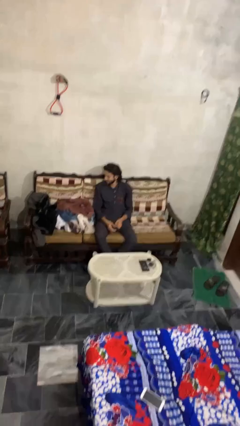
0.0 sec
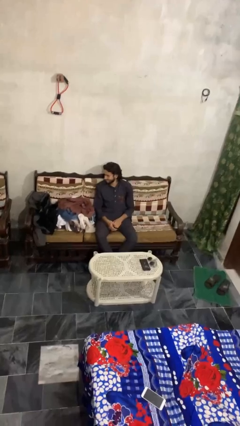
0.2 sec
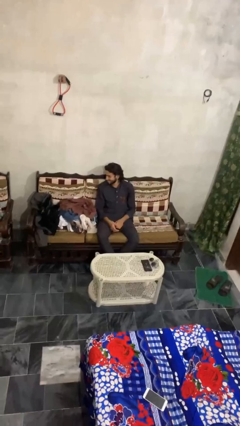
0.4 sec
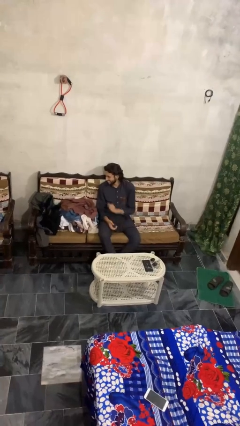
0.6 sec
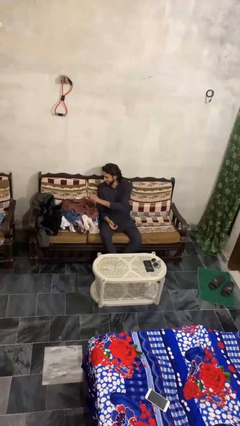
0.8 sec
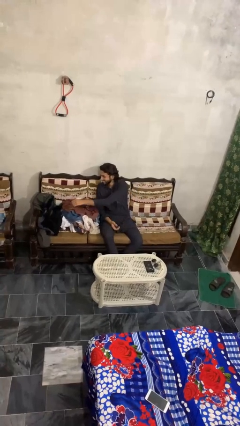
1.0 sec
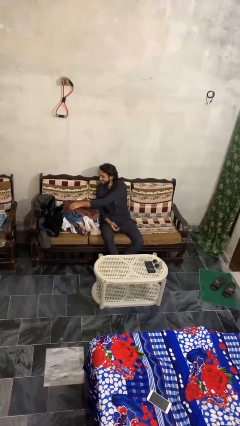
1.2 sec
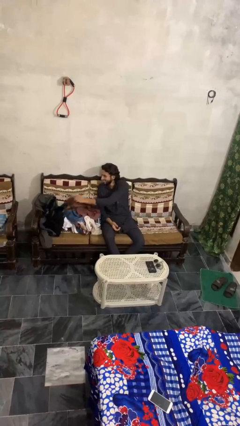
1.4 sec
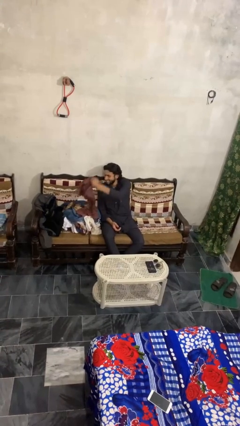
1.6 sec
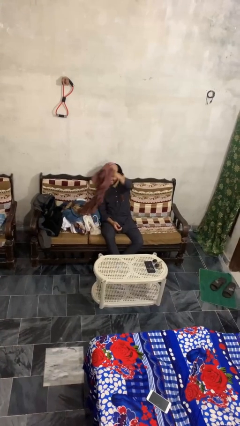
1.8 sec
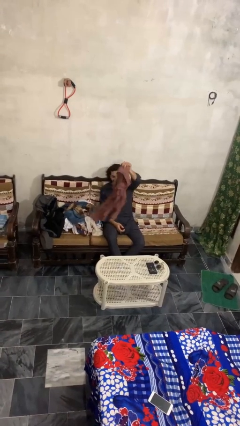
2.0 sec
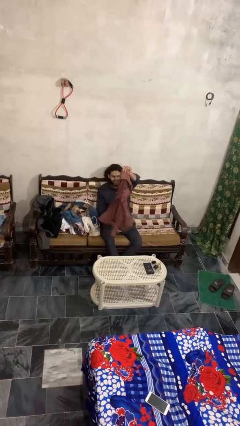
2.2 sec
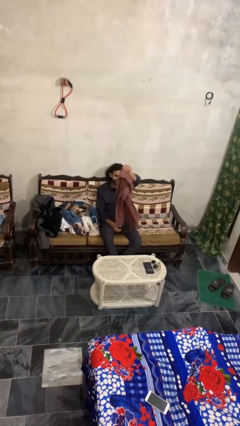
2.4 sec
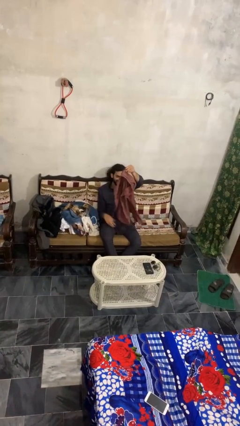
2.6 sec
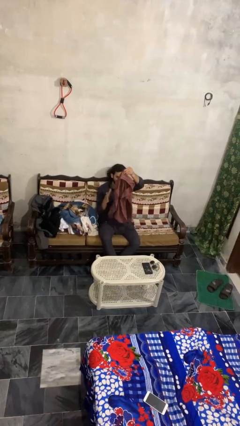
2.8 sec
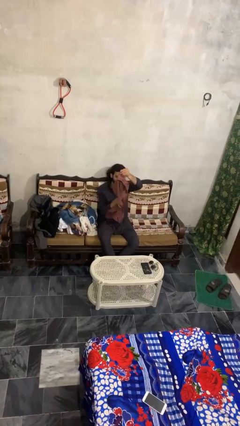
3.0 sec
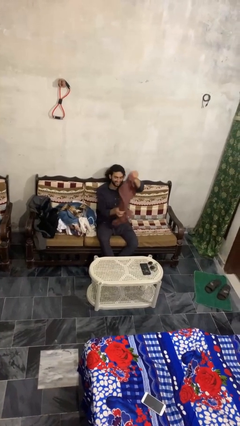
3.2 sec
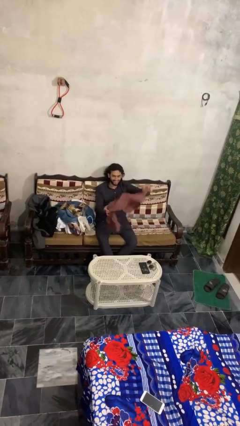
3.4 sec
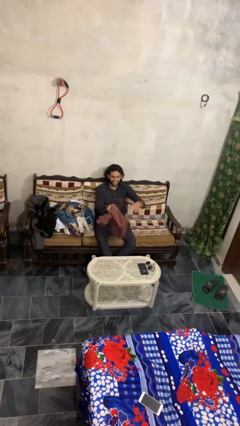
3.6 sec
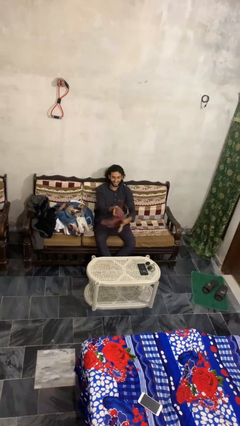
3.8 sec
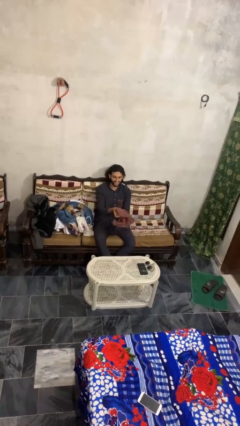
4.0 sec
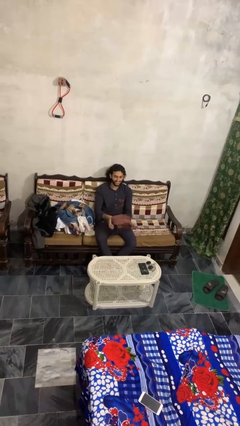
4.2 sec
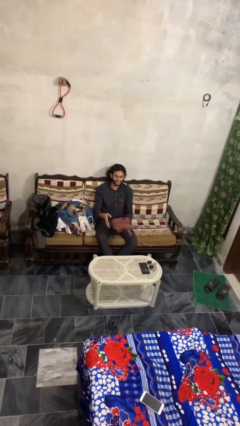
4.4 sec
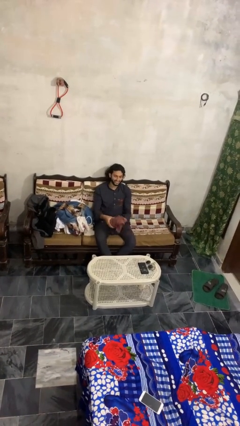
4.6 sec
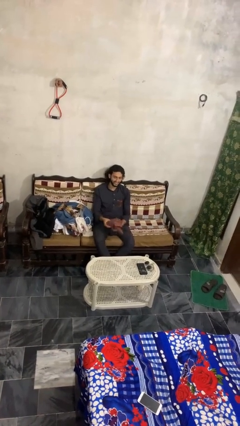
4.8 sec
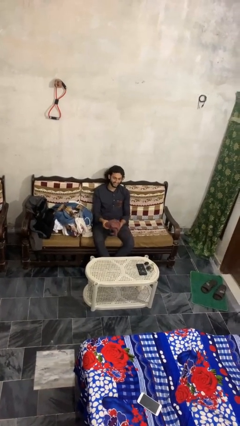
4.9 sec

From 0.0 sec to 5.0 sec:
person folds shirt

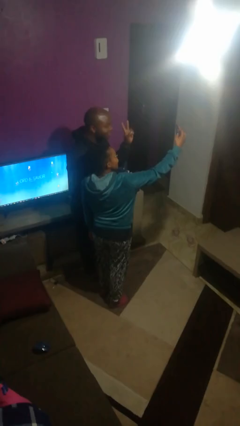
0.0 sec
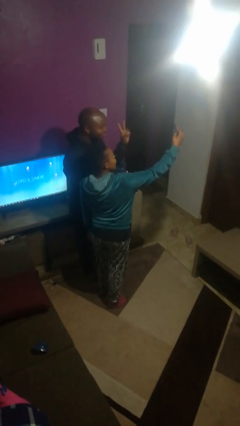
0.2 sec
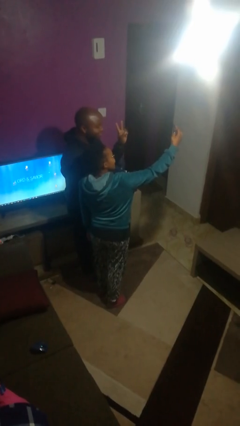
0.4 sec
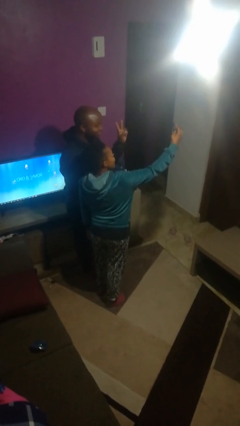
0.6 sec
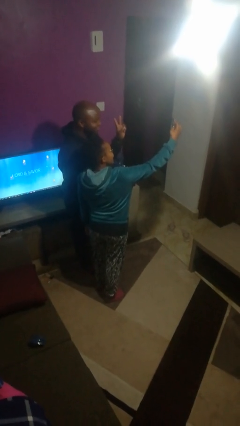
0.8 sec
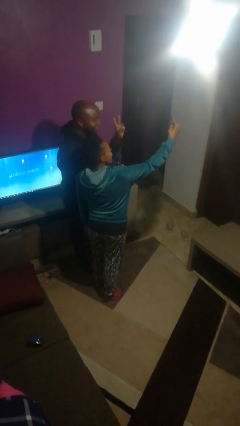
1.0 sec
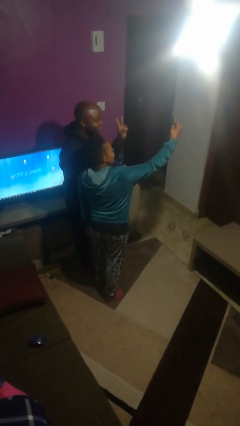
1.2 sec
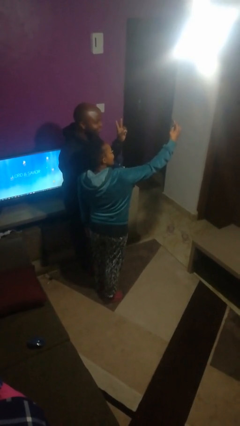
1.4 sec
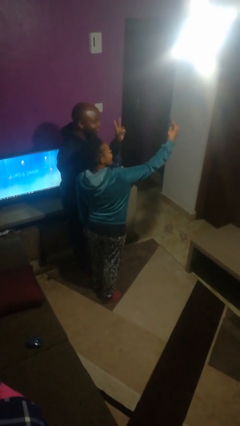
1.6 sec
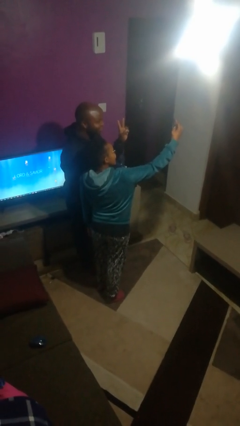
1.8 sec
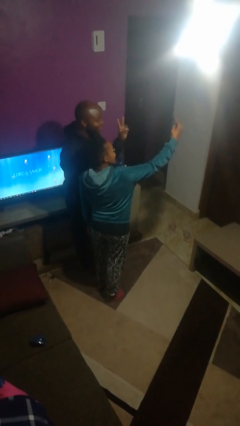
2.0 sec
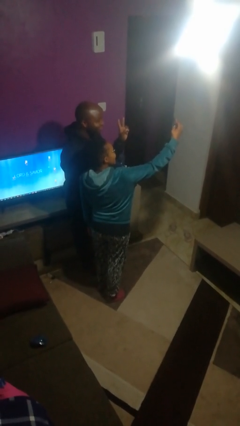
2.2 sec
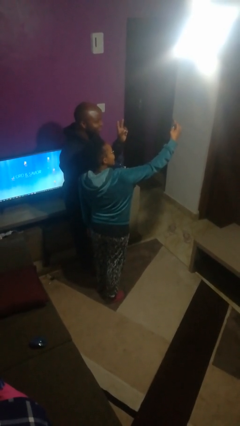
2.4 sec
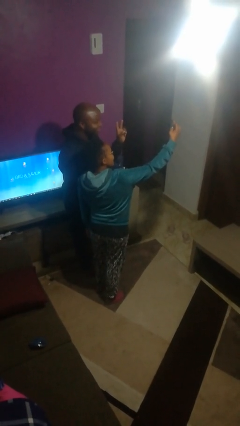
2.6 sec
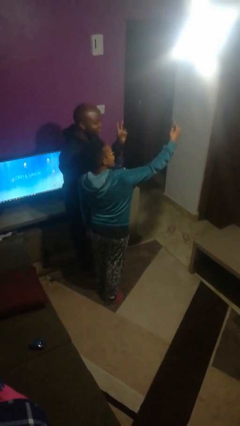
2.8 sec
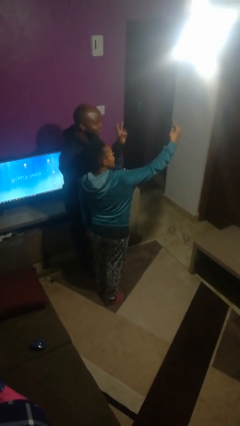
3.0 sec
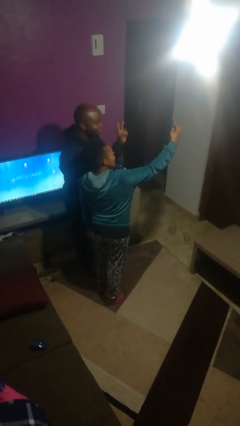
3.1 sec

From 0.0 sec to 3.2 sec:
person takes selfie with person

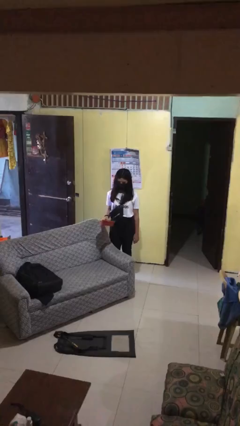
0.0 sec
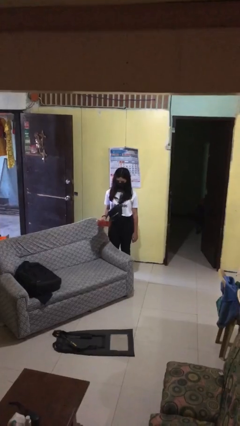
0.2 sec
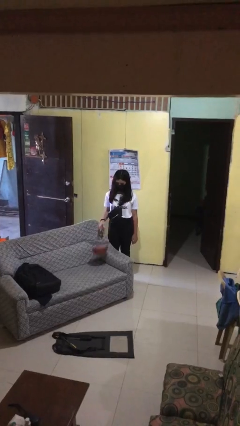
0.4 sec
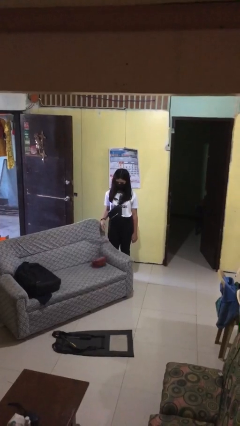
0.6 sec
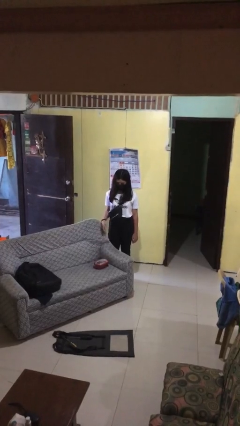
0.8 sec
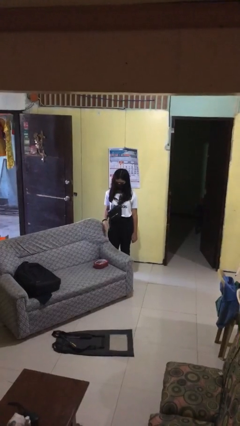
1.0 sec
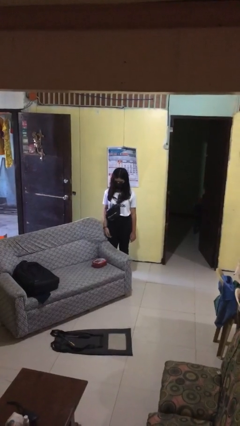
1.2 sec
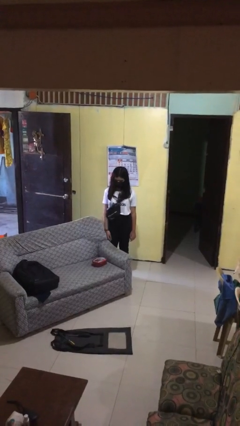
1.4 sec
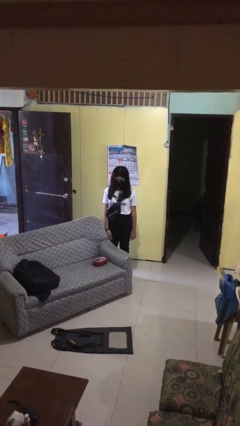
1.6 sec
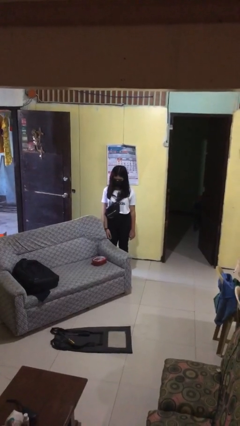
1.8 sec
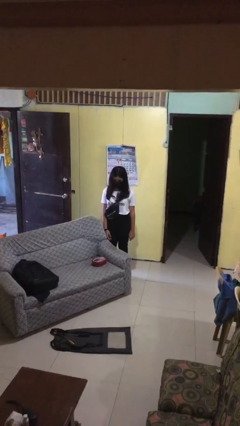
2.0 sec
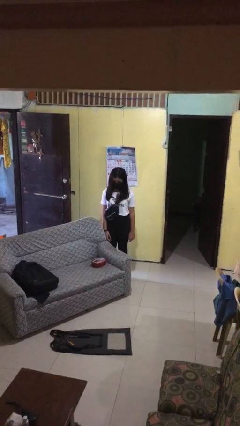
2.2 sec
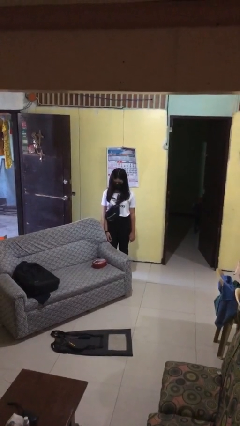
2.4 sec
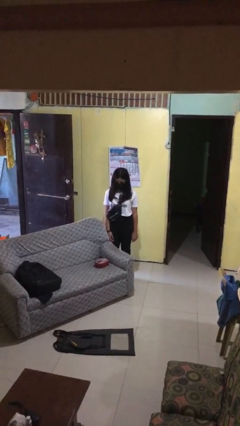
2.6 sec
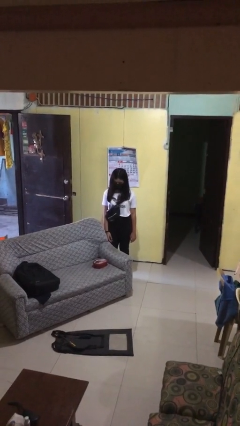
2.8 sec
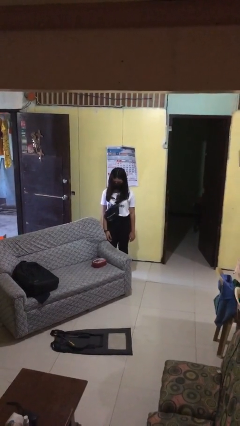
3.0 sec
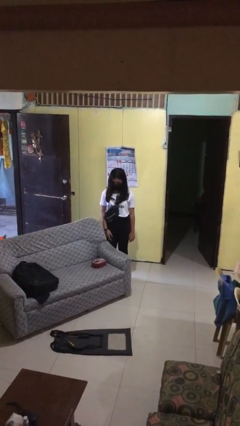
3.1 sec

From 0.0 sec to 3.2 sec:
person puts down object on couch

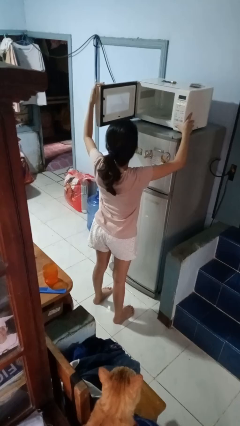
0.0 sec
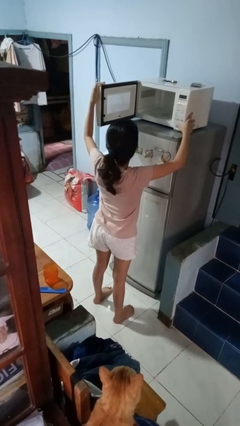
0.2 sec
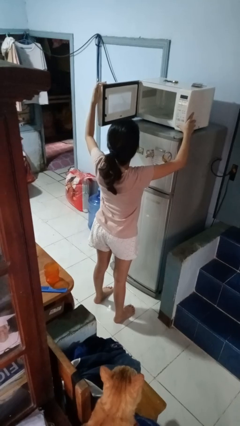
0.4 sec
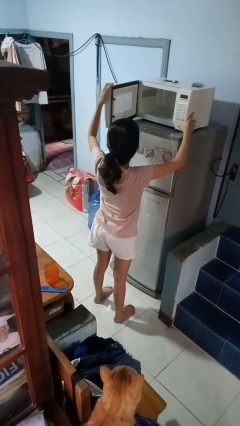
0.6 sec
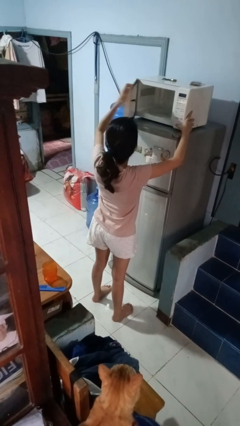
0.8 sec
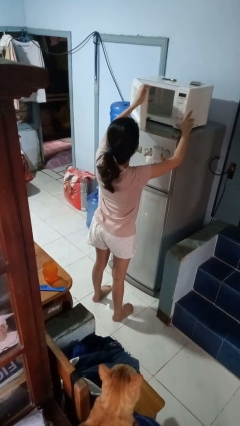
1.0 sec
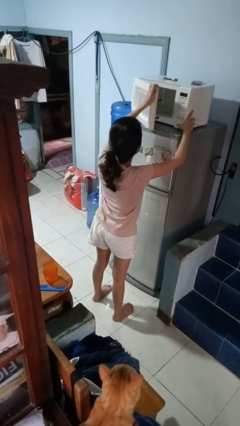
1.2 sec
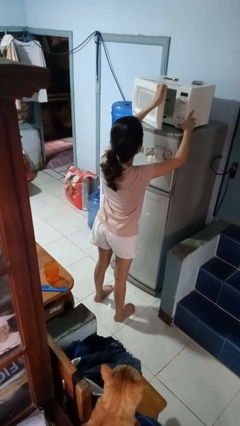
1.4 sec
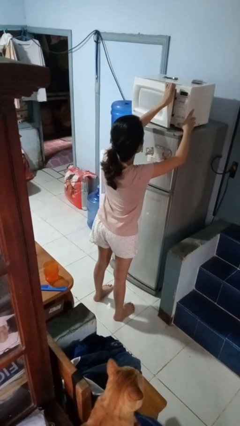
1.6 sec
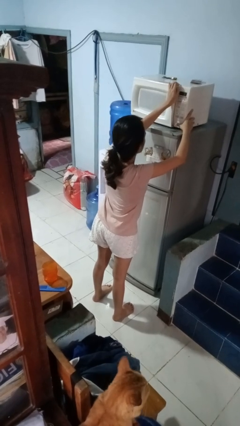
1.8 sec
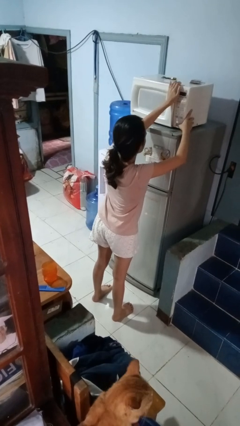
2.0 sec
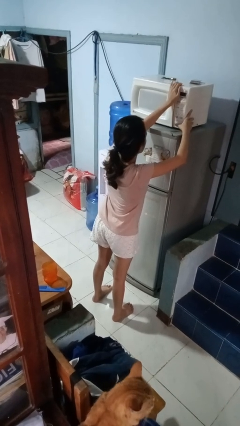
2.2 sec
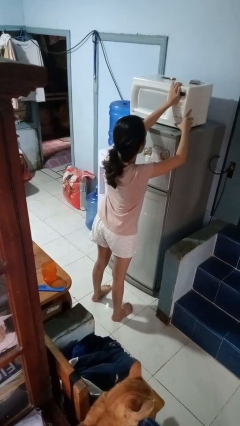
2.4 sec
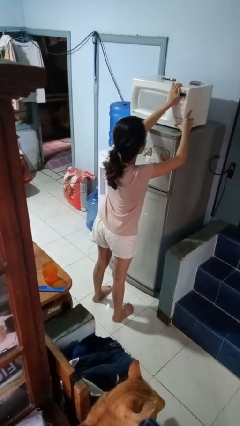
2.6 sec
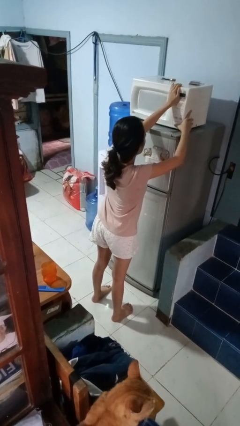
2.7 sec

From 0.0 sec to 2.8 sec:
person closes microwave

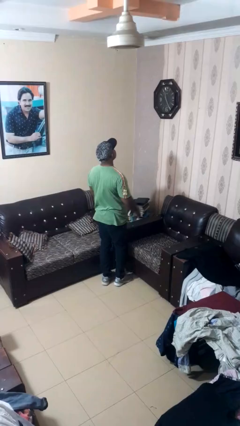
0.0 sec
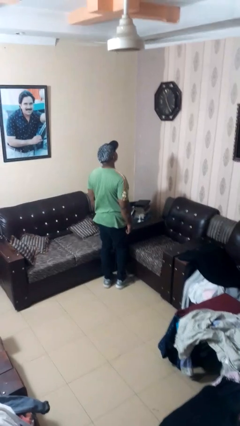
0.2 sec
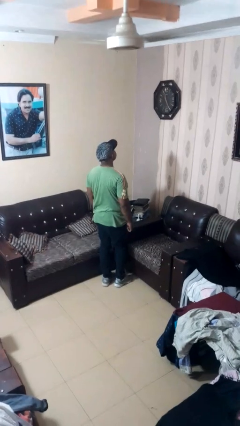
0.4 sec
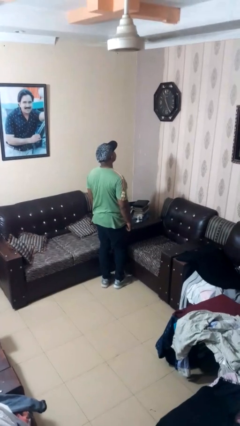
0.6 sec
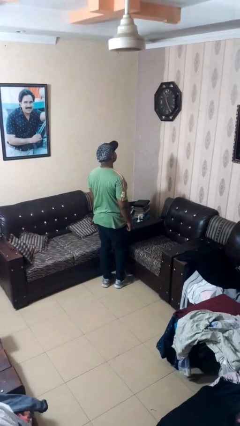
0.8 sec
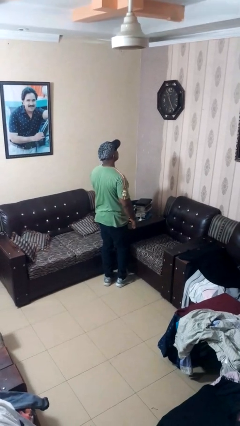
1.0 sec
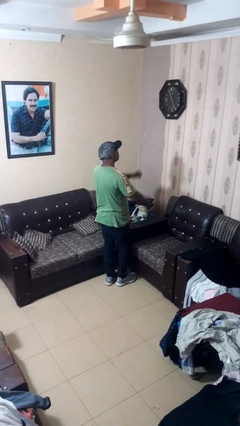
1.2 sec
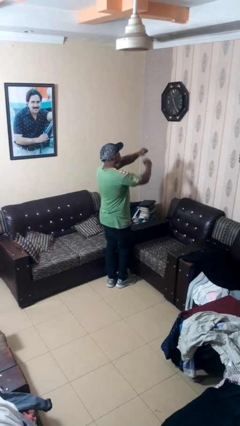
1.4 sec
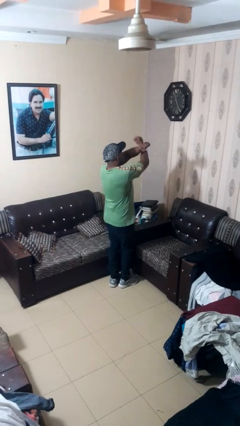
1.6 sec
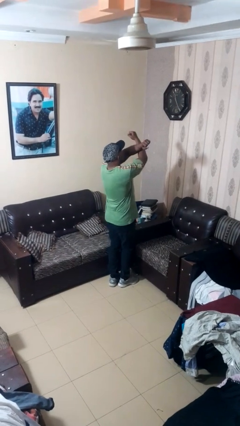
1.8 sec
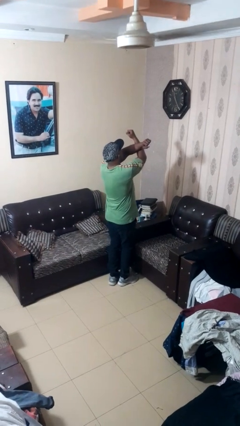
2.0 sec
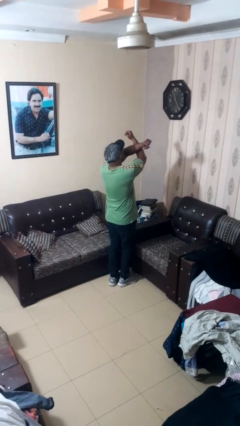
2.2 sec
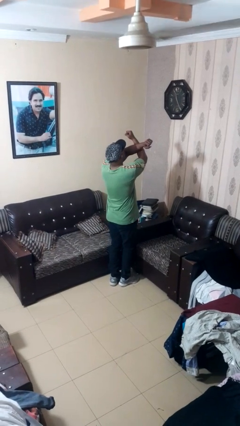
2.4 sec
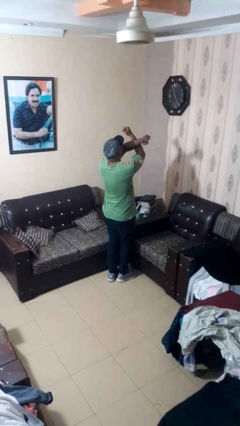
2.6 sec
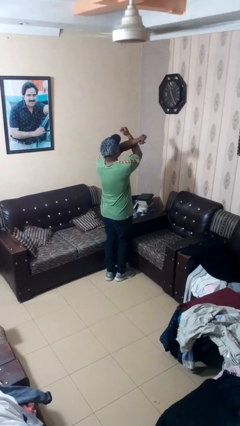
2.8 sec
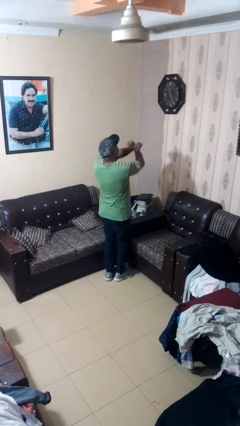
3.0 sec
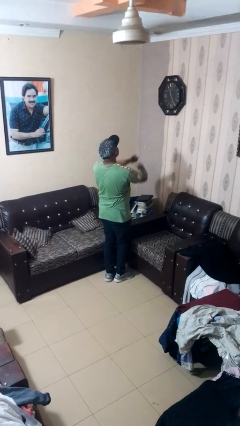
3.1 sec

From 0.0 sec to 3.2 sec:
person gestures arms x
